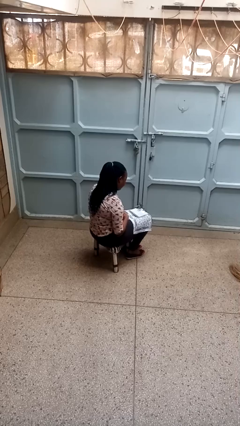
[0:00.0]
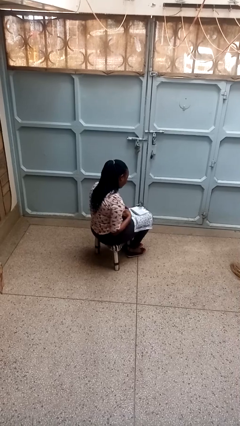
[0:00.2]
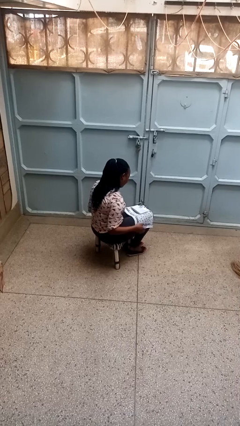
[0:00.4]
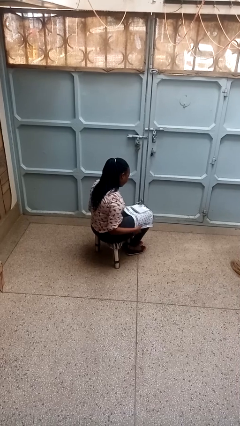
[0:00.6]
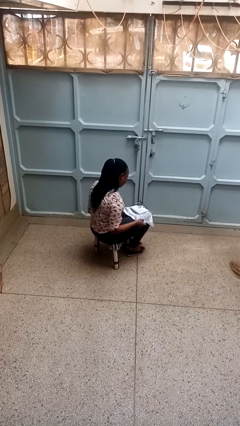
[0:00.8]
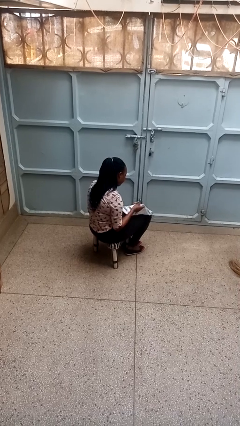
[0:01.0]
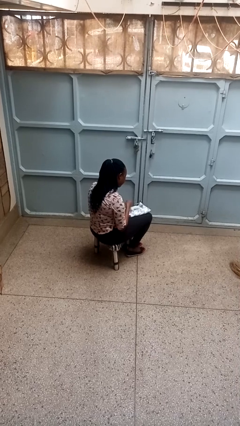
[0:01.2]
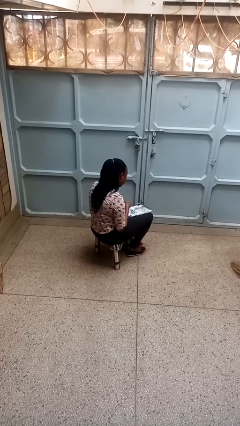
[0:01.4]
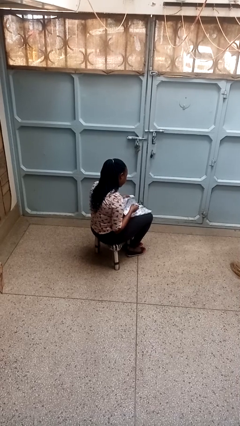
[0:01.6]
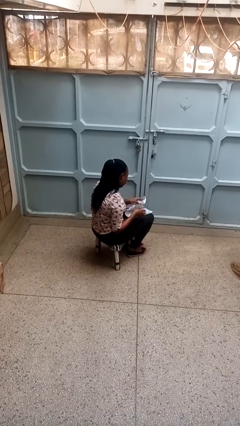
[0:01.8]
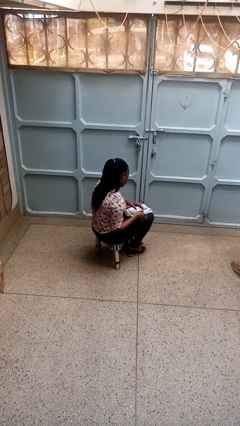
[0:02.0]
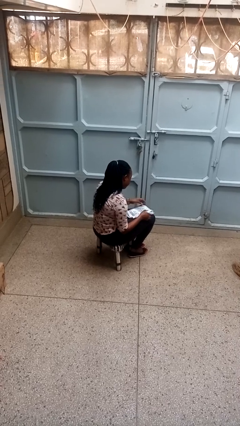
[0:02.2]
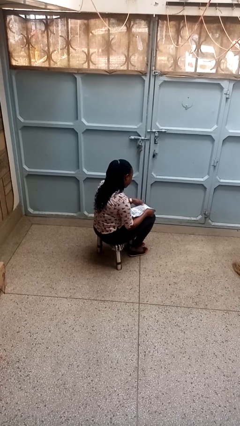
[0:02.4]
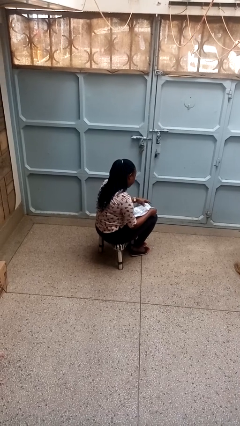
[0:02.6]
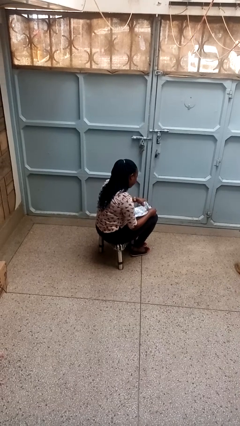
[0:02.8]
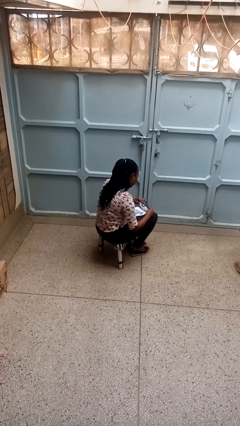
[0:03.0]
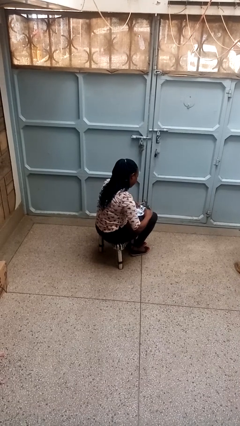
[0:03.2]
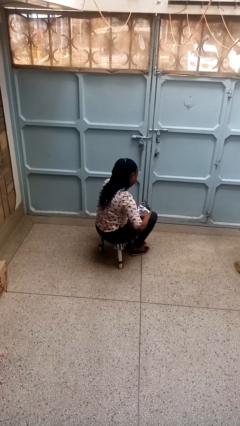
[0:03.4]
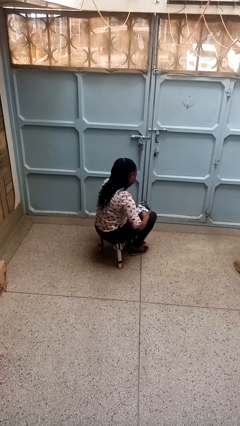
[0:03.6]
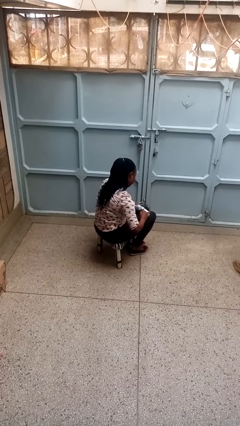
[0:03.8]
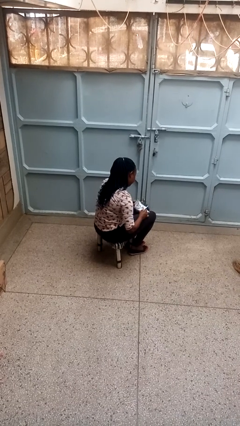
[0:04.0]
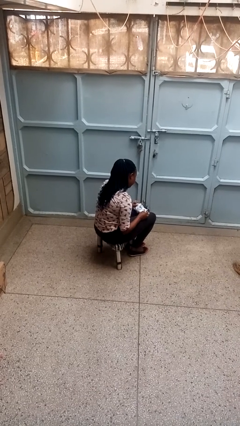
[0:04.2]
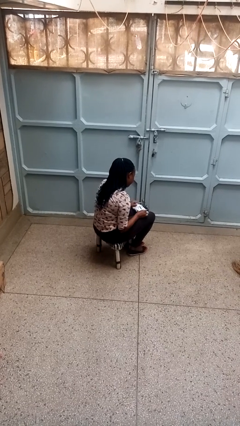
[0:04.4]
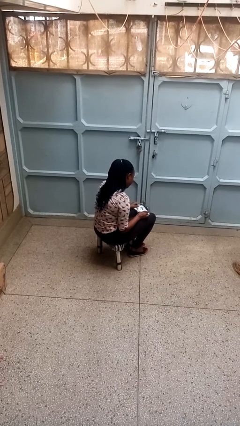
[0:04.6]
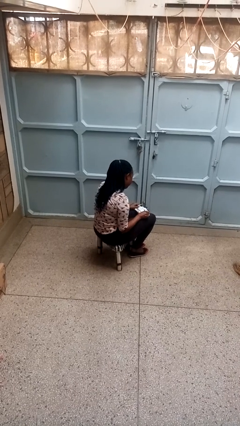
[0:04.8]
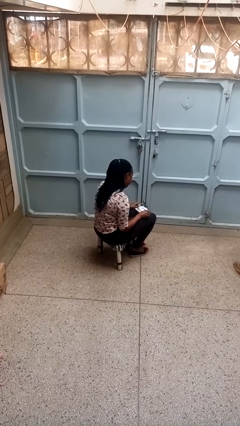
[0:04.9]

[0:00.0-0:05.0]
person wraps box

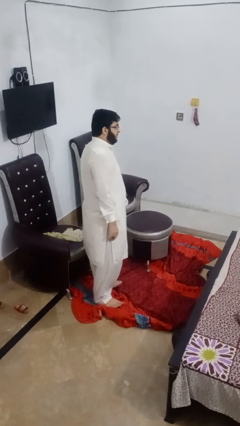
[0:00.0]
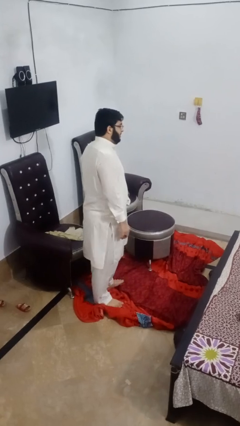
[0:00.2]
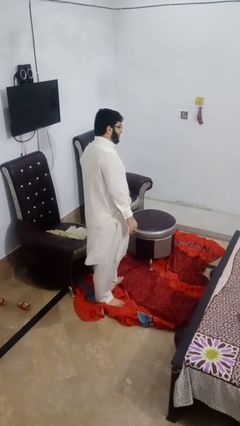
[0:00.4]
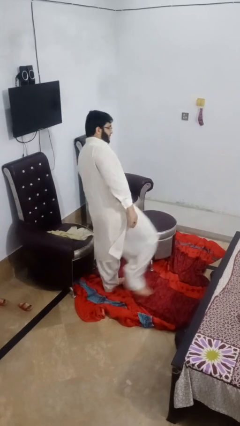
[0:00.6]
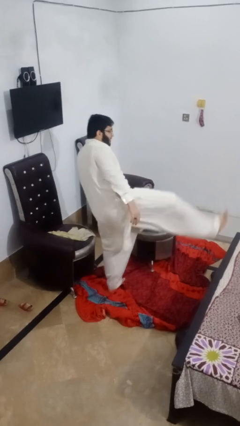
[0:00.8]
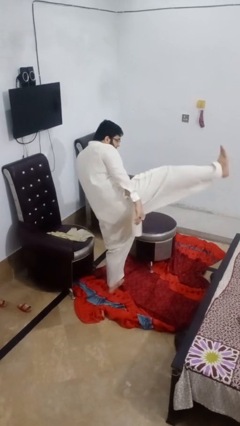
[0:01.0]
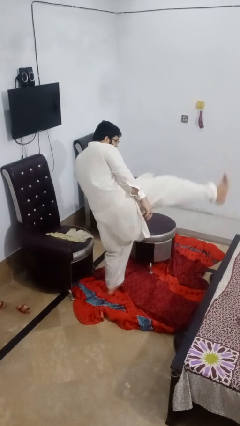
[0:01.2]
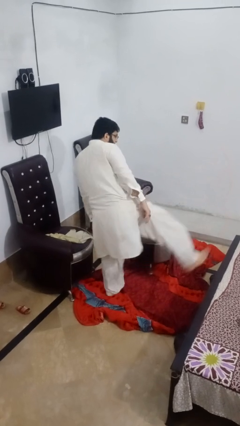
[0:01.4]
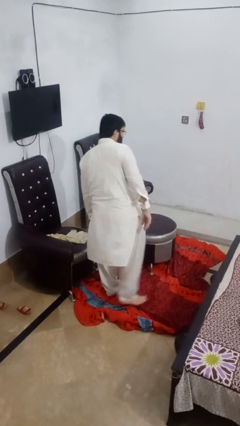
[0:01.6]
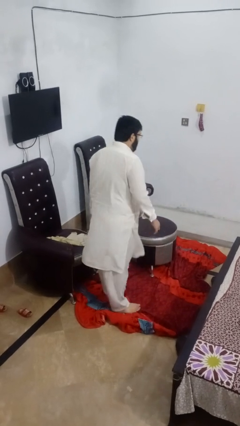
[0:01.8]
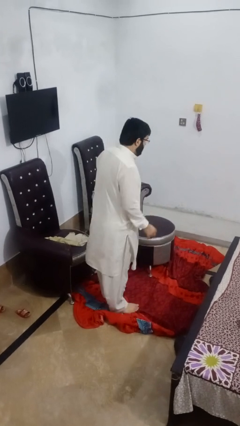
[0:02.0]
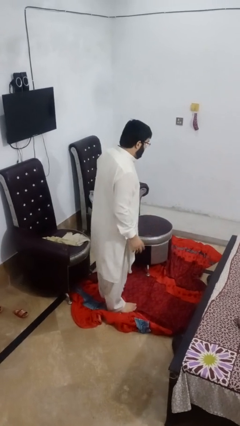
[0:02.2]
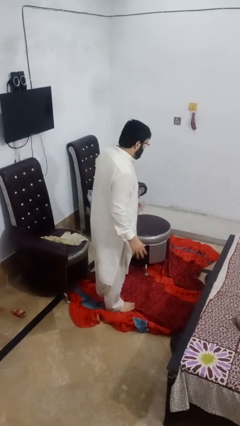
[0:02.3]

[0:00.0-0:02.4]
person karate kicks

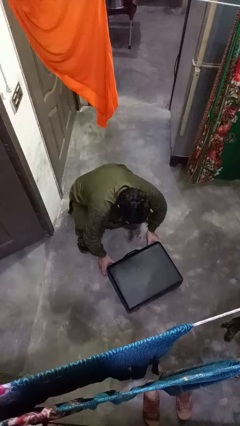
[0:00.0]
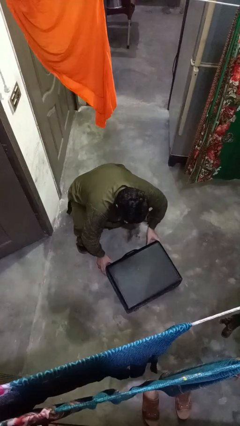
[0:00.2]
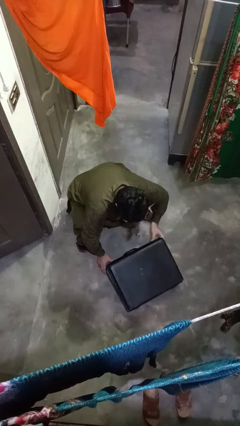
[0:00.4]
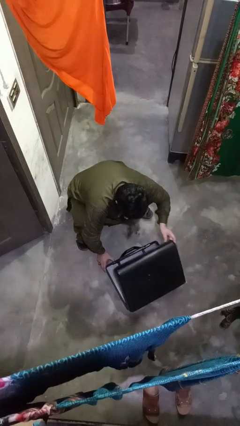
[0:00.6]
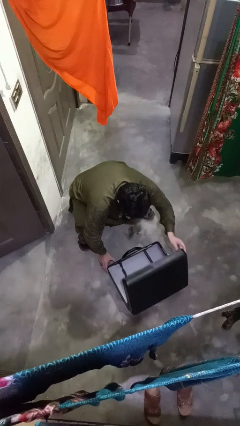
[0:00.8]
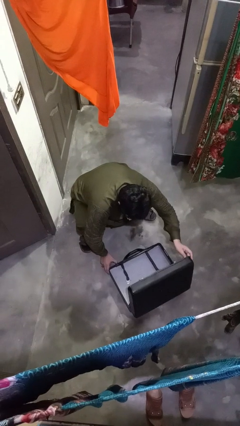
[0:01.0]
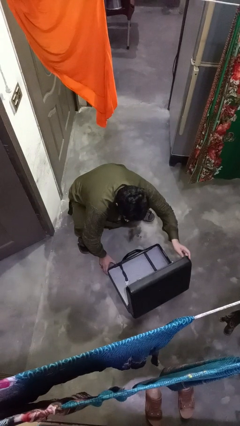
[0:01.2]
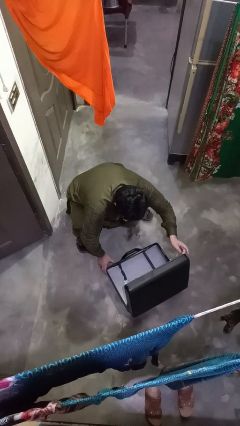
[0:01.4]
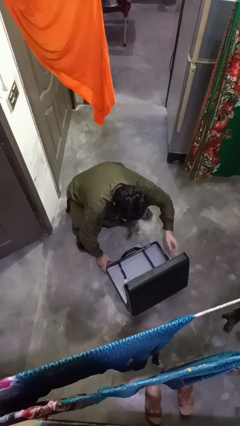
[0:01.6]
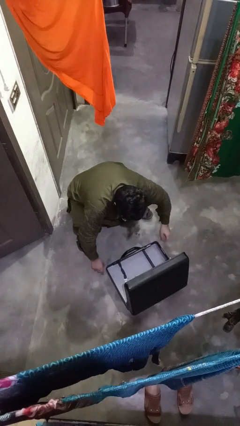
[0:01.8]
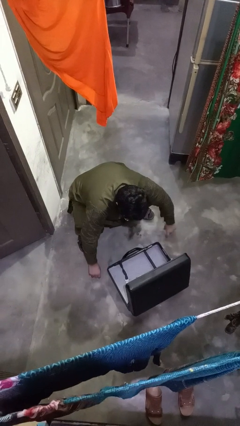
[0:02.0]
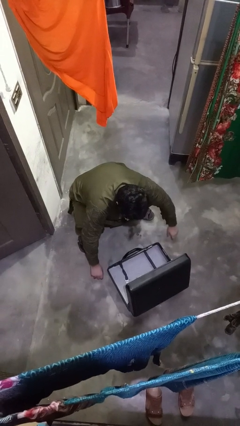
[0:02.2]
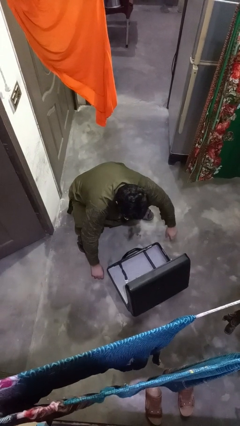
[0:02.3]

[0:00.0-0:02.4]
person opens suitcase

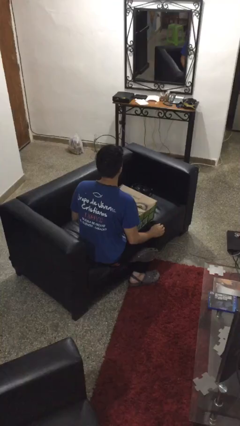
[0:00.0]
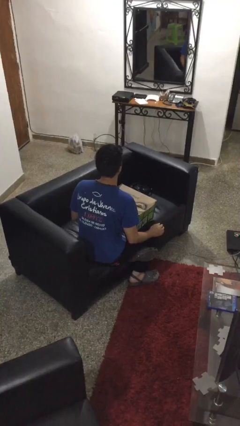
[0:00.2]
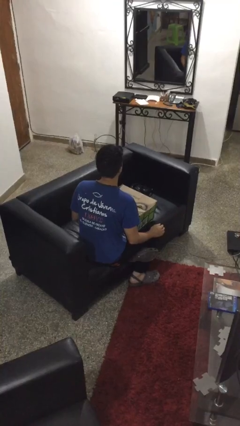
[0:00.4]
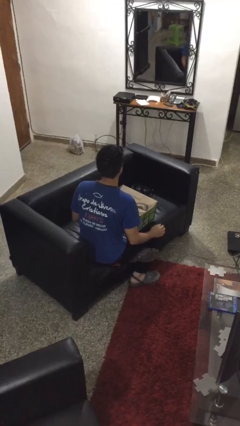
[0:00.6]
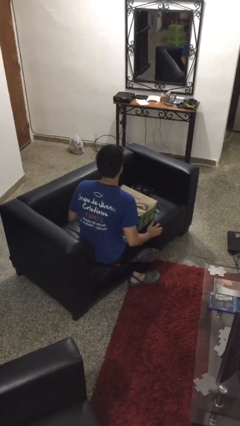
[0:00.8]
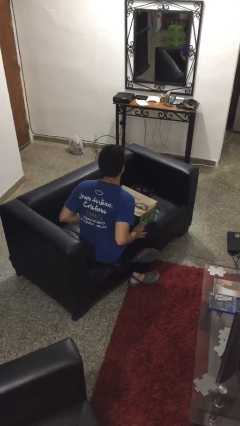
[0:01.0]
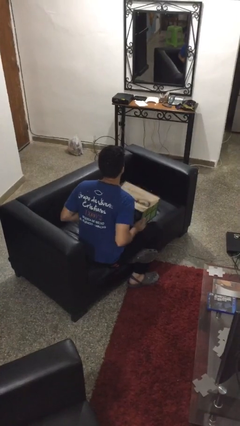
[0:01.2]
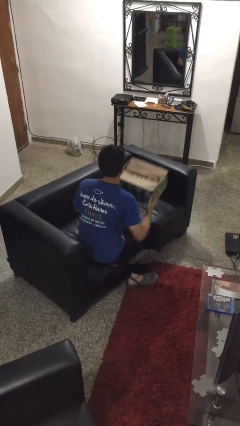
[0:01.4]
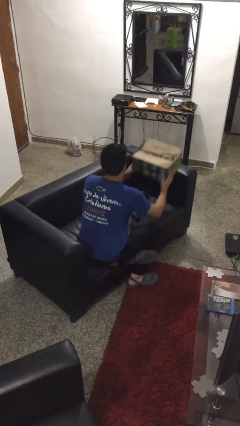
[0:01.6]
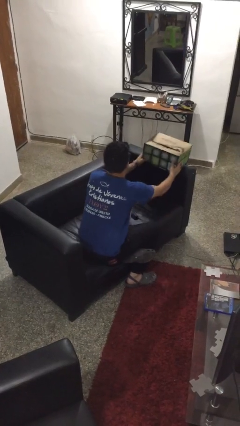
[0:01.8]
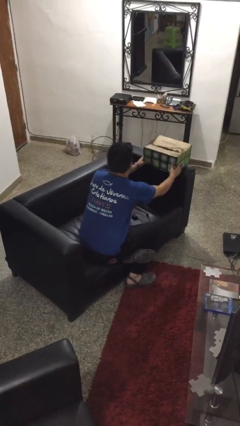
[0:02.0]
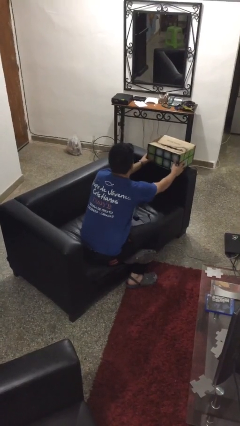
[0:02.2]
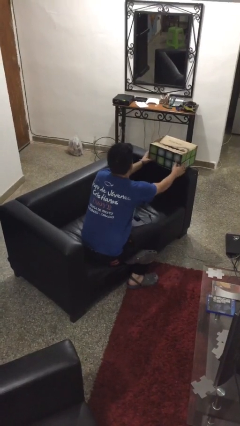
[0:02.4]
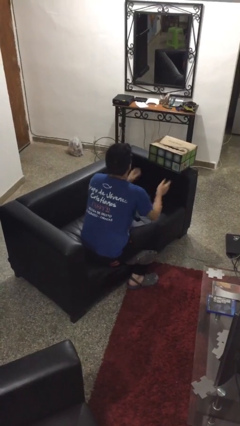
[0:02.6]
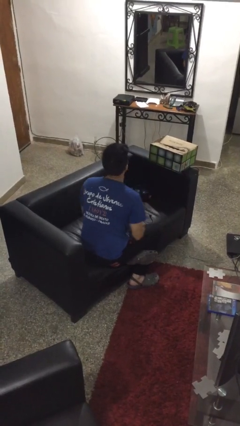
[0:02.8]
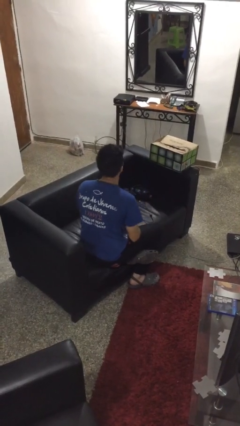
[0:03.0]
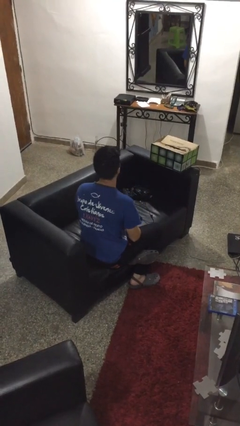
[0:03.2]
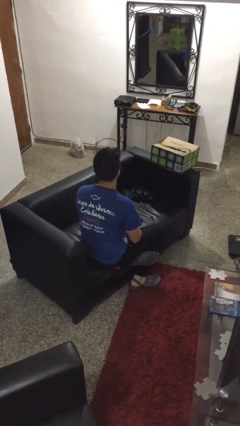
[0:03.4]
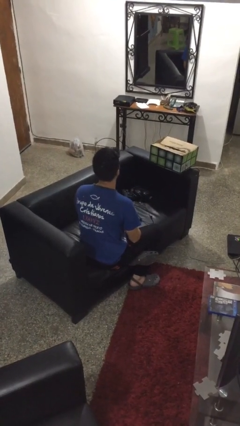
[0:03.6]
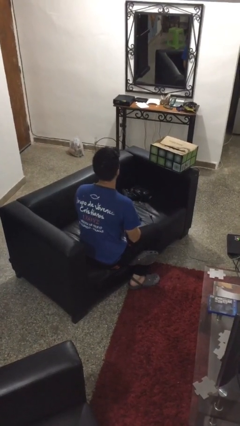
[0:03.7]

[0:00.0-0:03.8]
person puts down object on couch

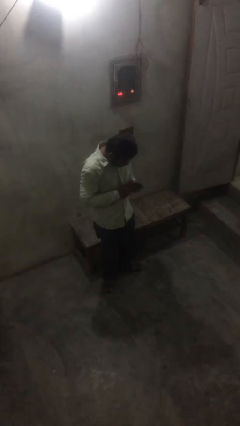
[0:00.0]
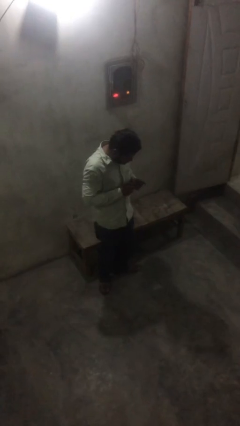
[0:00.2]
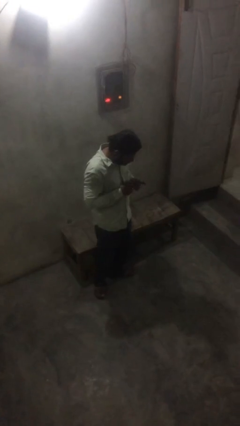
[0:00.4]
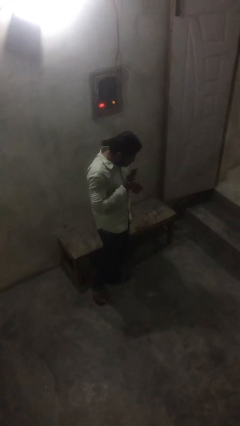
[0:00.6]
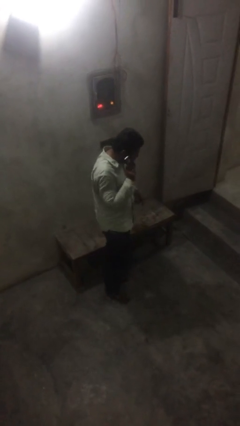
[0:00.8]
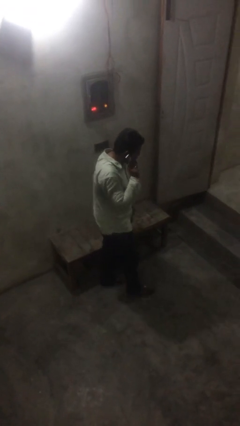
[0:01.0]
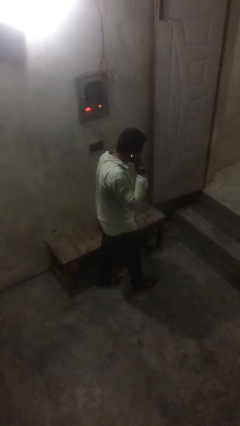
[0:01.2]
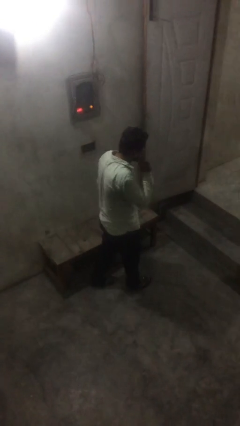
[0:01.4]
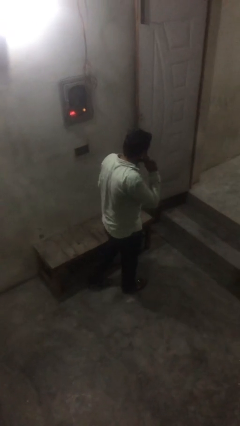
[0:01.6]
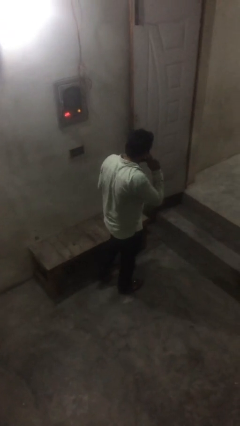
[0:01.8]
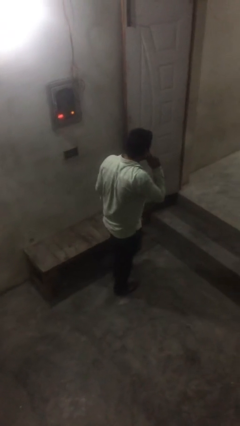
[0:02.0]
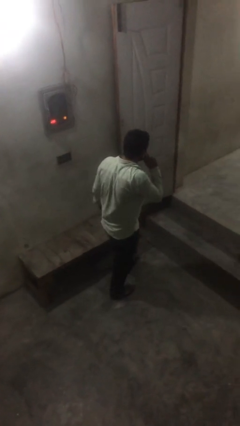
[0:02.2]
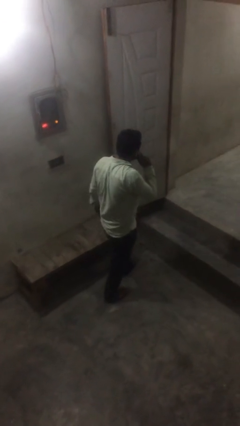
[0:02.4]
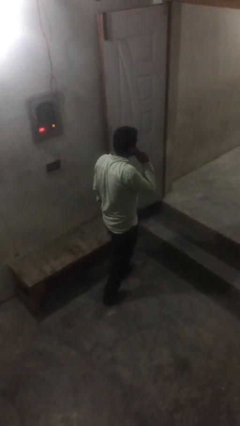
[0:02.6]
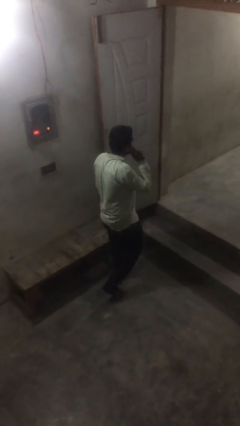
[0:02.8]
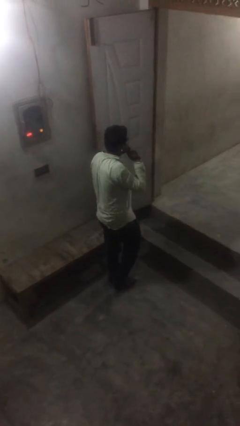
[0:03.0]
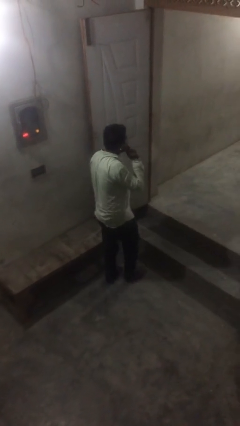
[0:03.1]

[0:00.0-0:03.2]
person talks on phone

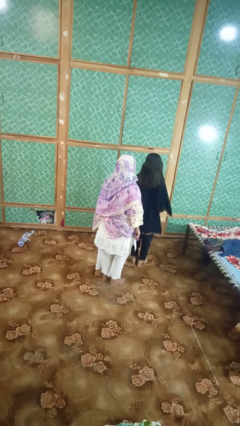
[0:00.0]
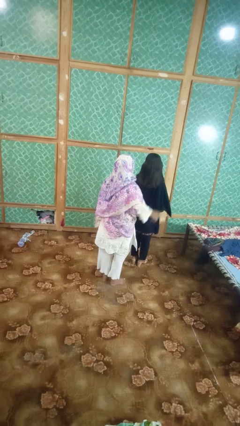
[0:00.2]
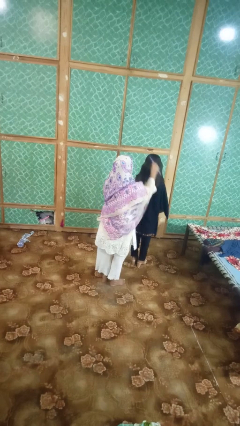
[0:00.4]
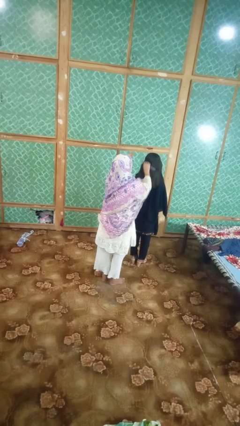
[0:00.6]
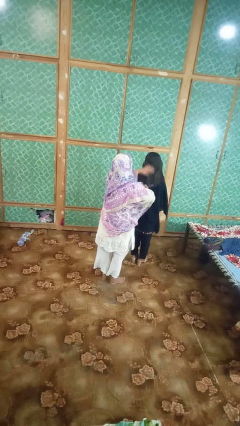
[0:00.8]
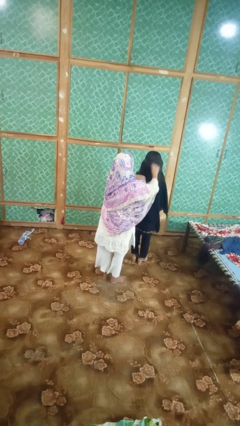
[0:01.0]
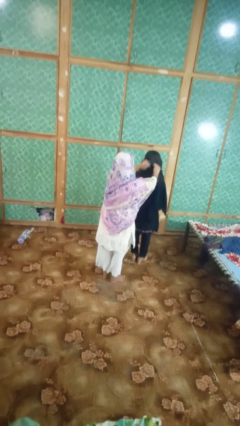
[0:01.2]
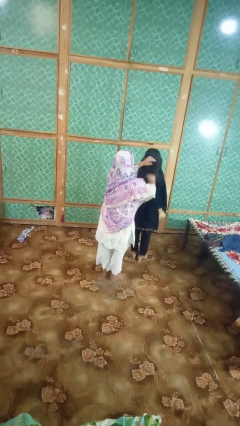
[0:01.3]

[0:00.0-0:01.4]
person brushes hair of person
